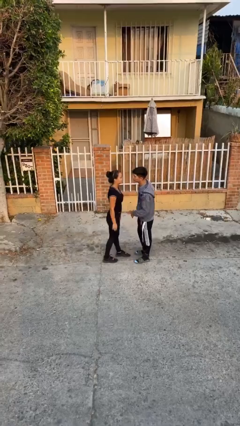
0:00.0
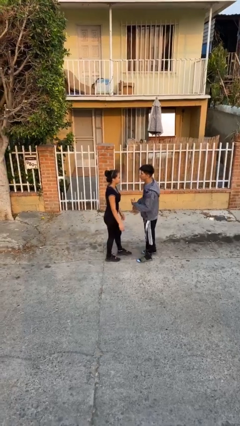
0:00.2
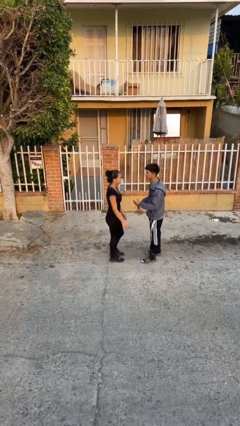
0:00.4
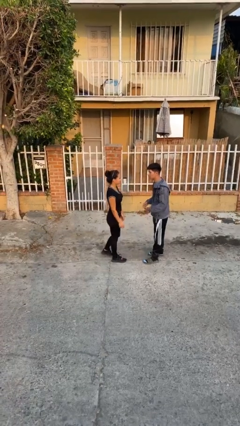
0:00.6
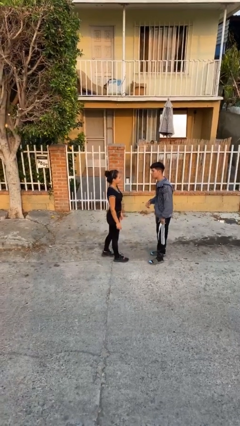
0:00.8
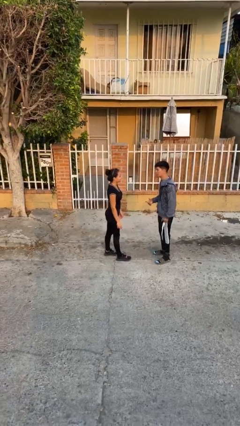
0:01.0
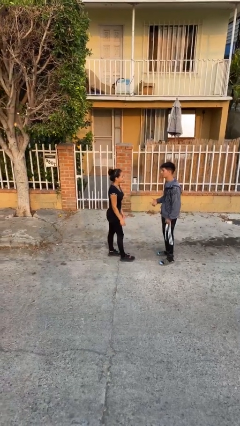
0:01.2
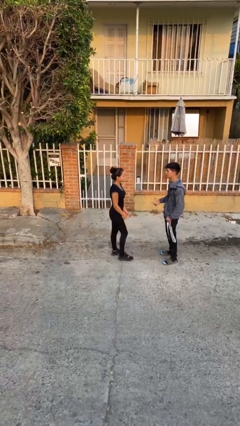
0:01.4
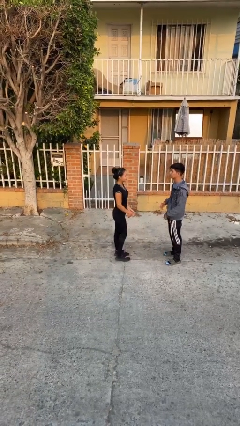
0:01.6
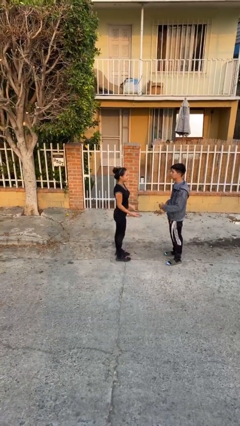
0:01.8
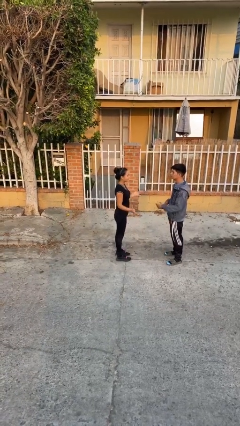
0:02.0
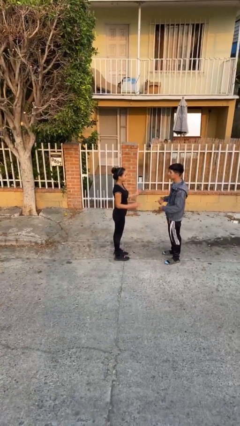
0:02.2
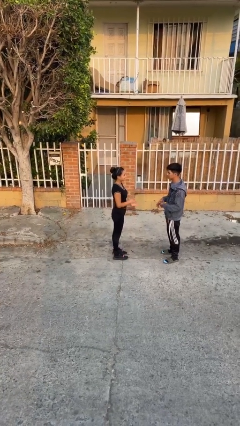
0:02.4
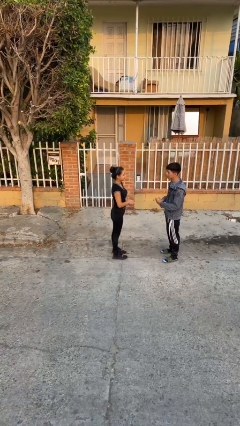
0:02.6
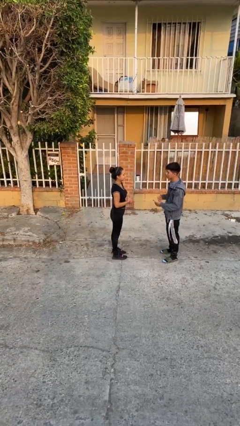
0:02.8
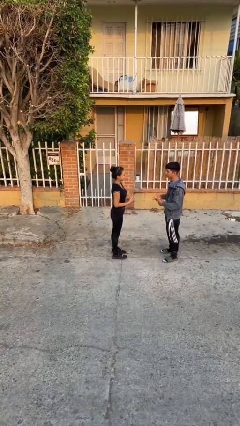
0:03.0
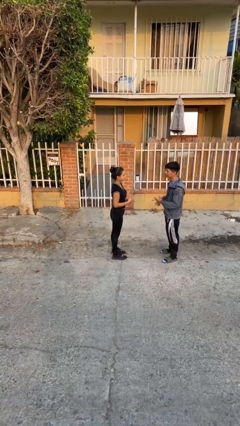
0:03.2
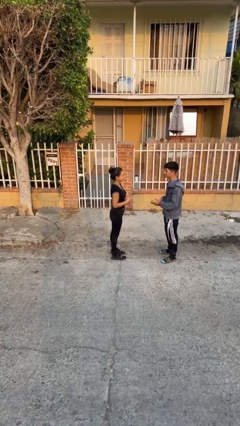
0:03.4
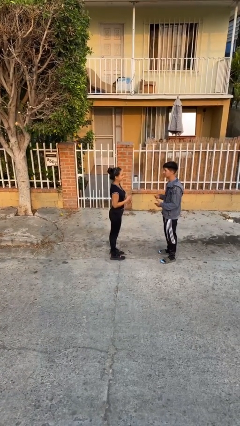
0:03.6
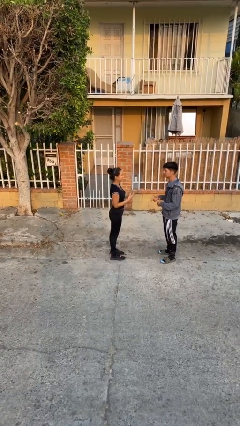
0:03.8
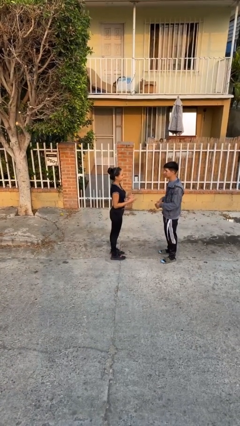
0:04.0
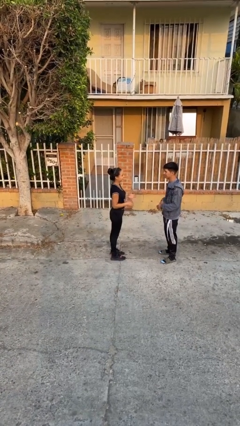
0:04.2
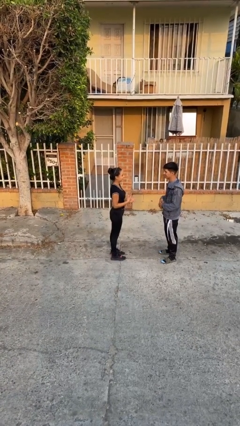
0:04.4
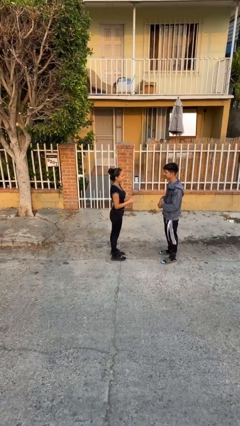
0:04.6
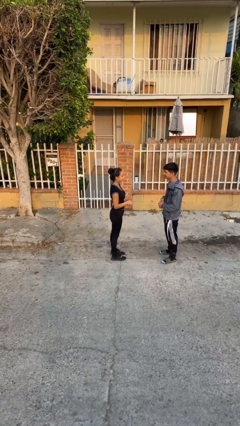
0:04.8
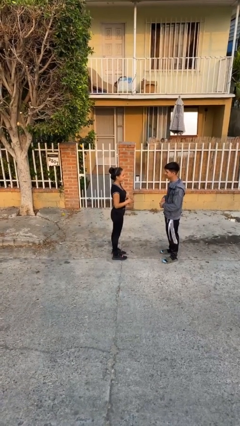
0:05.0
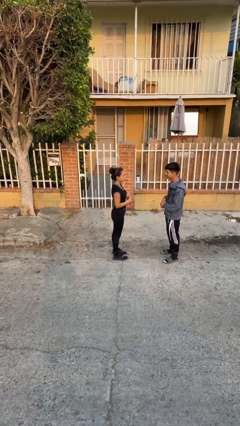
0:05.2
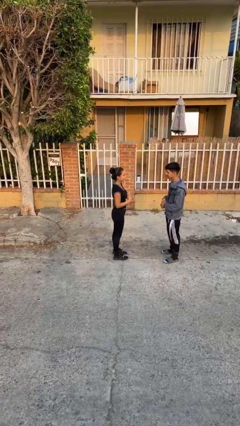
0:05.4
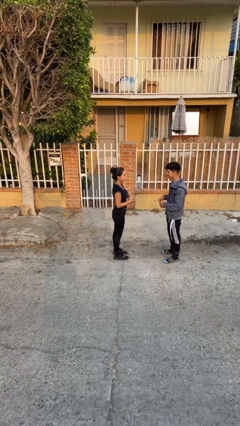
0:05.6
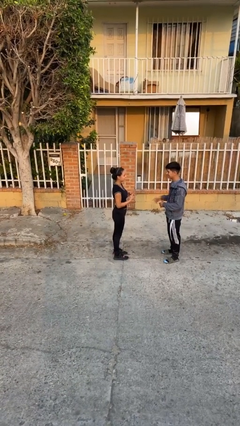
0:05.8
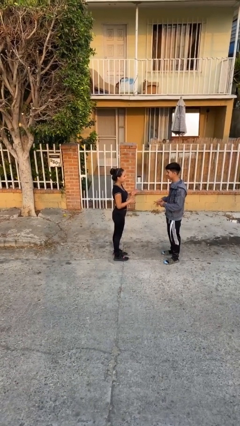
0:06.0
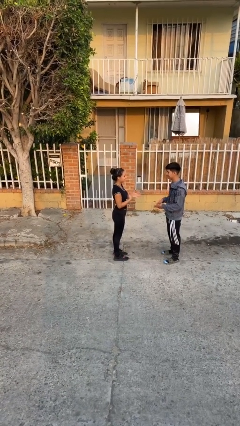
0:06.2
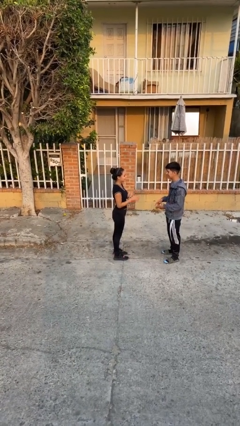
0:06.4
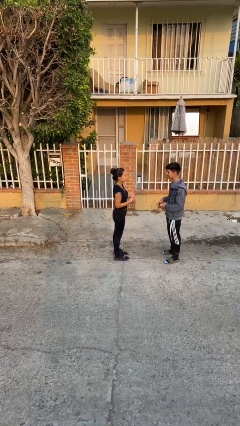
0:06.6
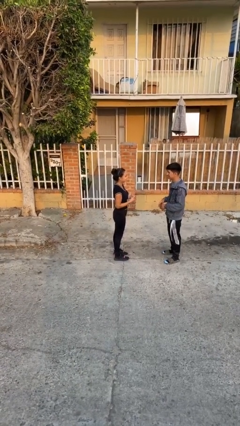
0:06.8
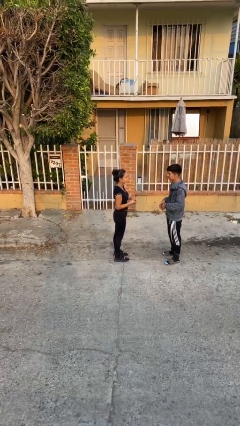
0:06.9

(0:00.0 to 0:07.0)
person talks to person

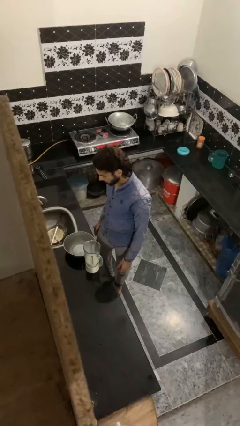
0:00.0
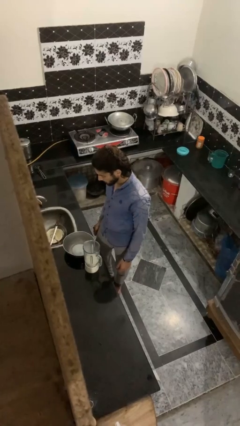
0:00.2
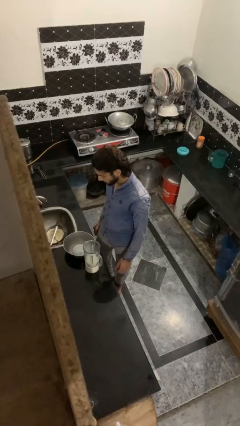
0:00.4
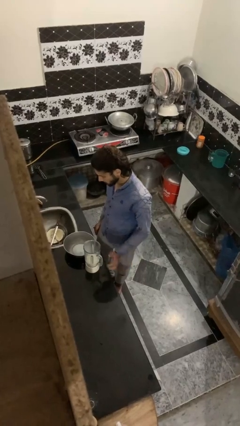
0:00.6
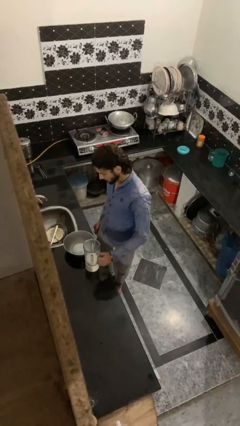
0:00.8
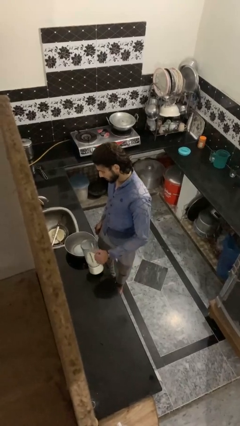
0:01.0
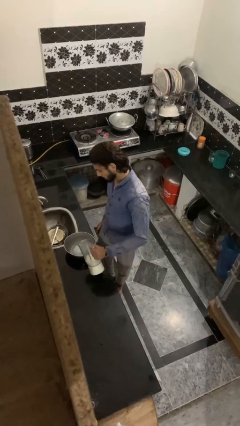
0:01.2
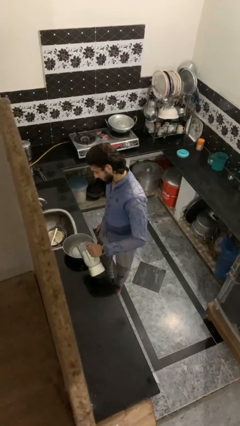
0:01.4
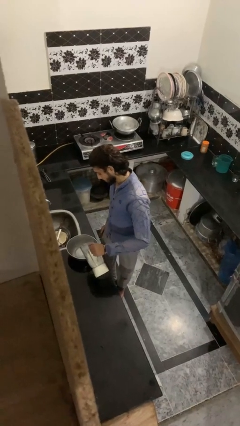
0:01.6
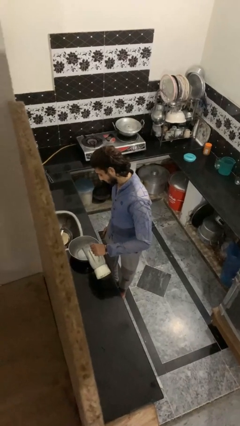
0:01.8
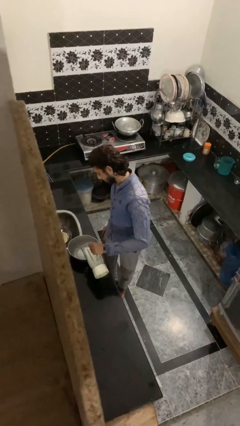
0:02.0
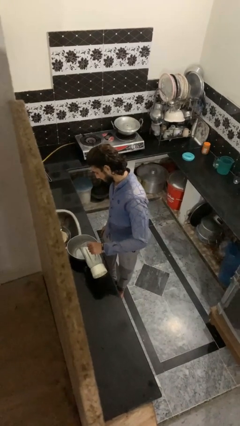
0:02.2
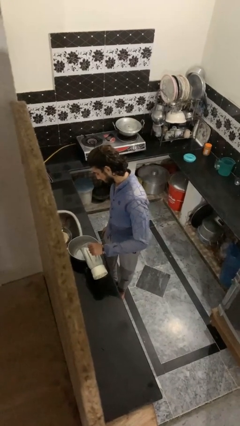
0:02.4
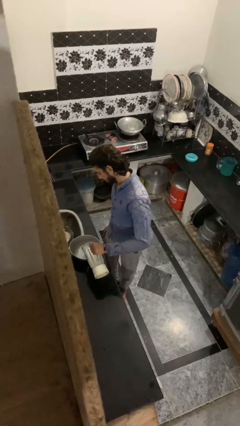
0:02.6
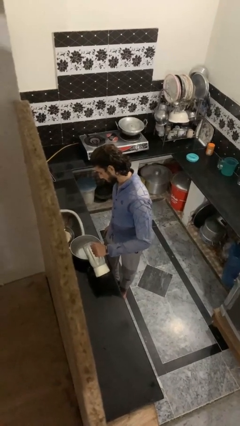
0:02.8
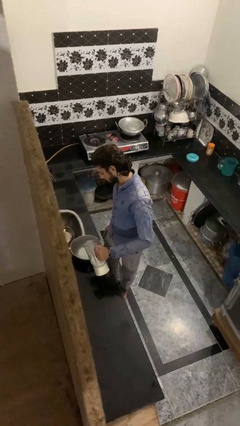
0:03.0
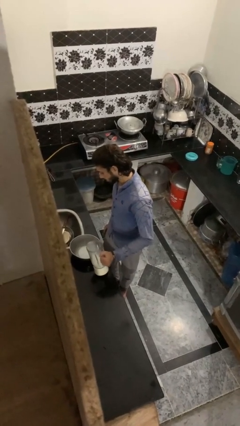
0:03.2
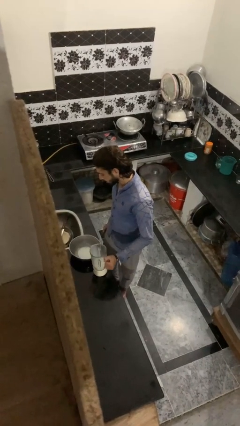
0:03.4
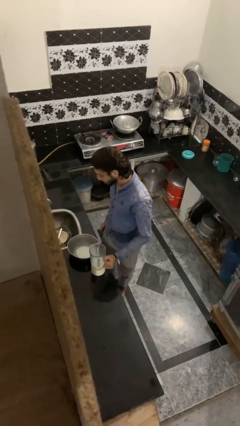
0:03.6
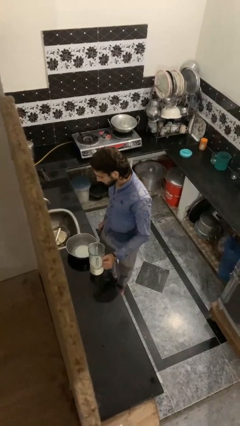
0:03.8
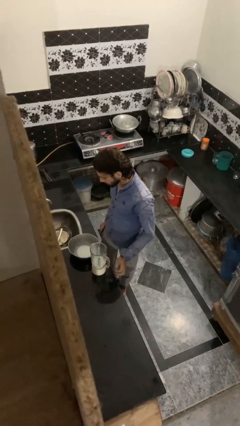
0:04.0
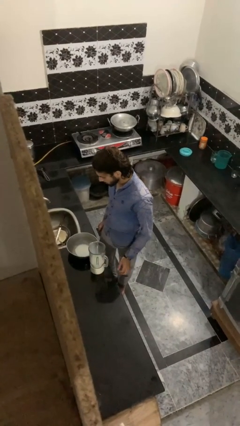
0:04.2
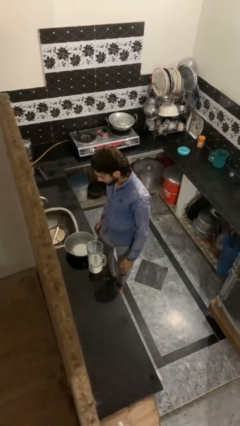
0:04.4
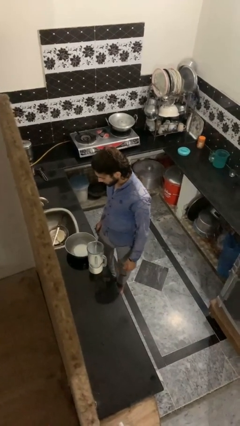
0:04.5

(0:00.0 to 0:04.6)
person pours into bowl

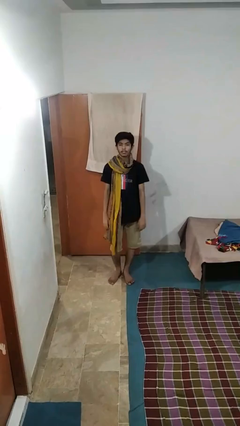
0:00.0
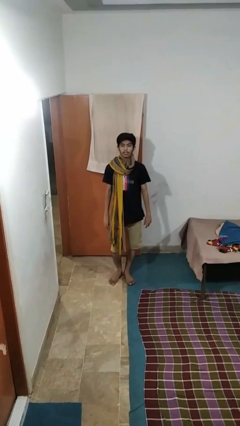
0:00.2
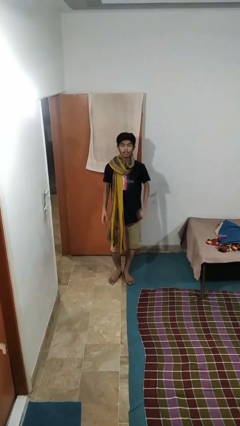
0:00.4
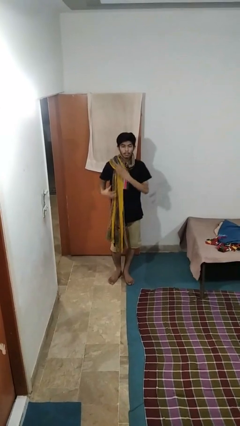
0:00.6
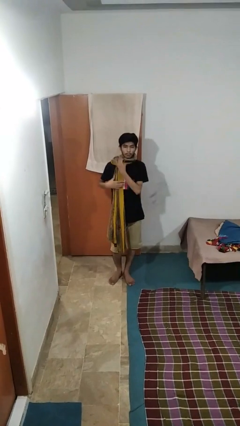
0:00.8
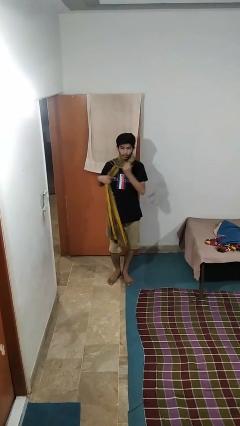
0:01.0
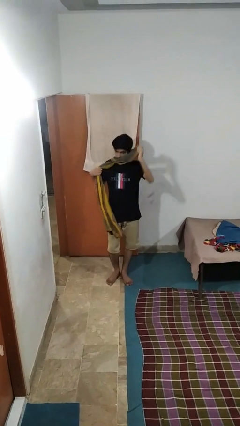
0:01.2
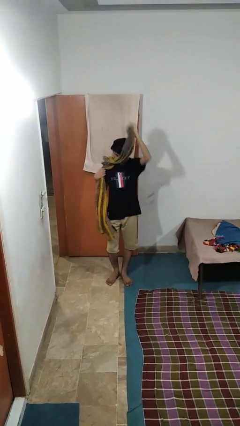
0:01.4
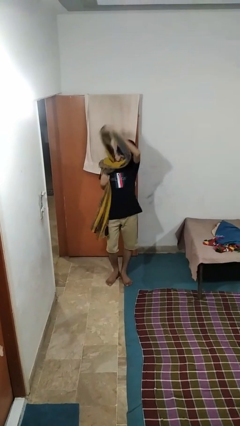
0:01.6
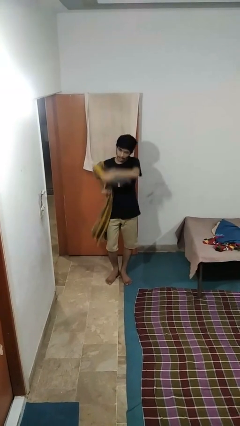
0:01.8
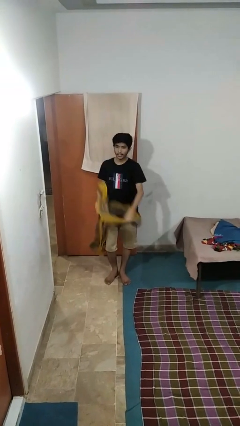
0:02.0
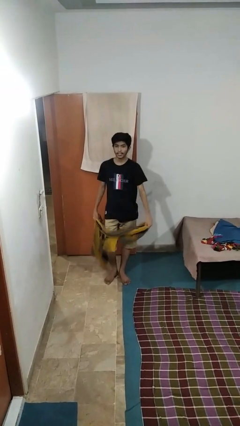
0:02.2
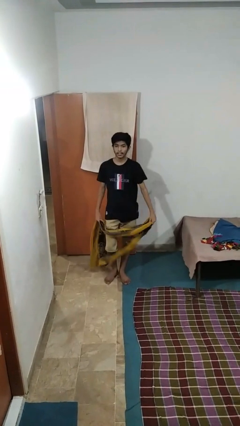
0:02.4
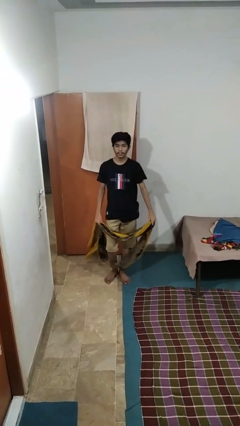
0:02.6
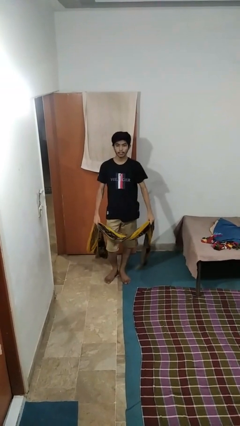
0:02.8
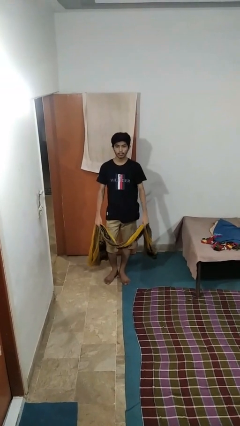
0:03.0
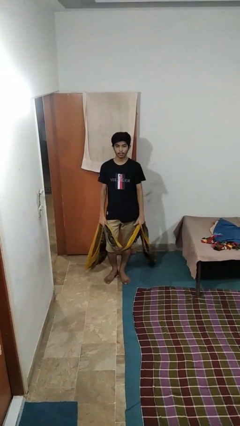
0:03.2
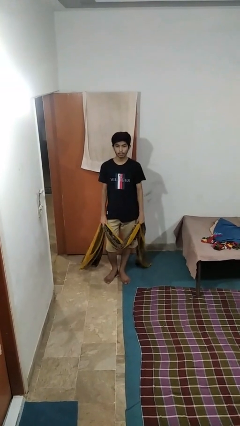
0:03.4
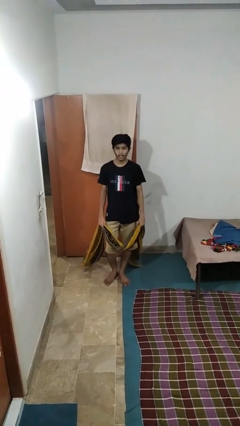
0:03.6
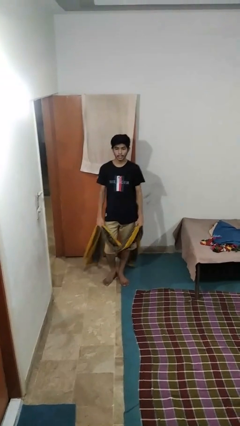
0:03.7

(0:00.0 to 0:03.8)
person takes off scarf

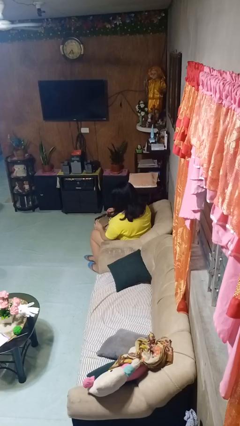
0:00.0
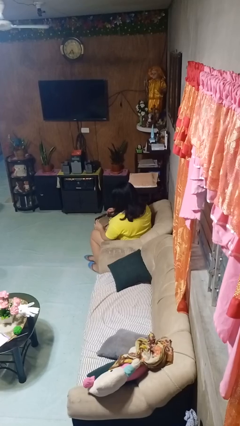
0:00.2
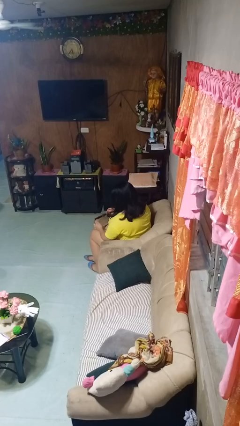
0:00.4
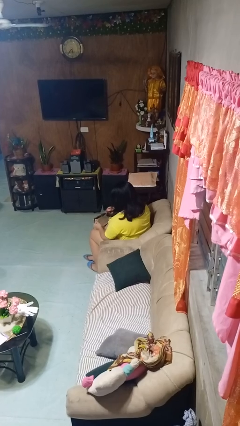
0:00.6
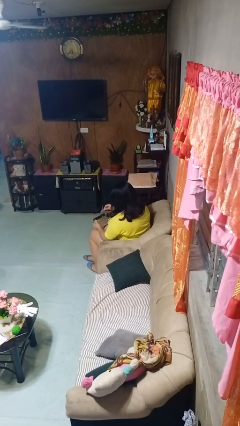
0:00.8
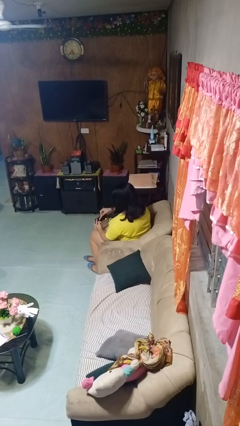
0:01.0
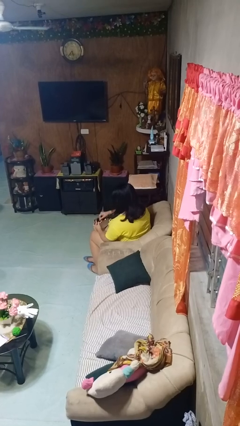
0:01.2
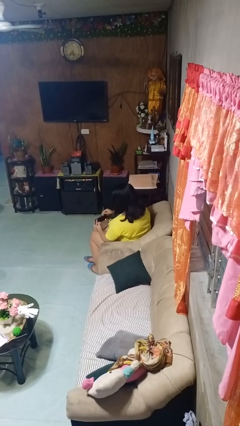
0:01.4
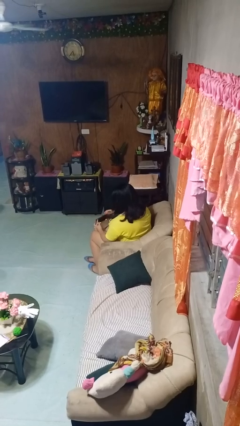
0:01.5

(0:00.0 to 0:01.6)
person puts object into purse

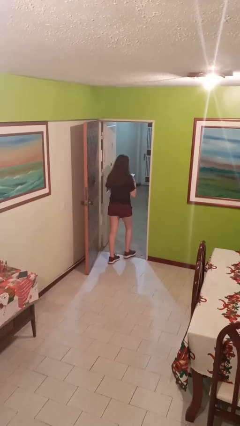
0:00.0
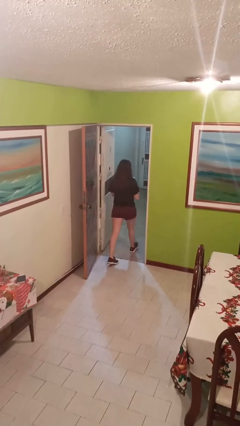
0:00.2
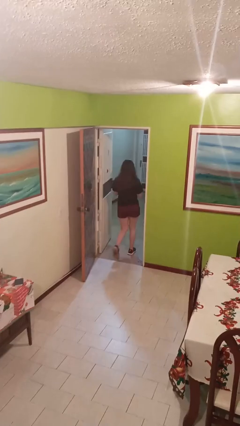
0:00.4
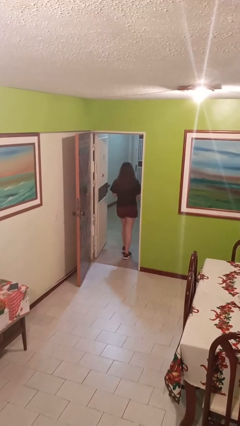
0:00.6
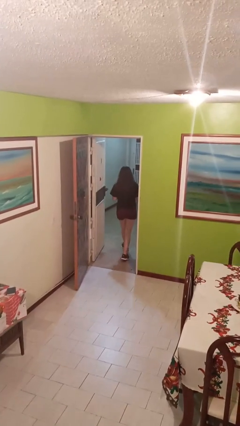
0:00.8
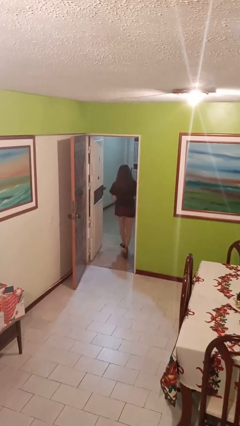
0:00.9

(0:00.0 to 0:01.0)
person exits scene through structure
